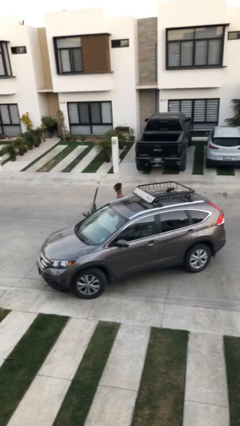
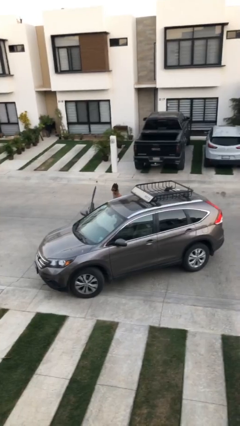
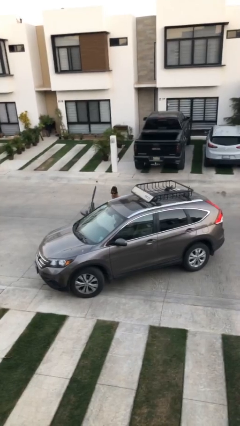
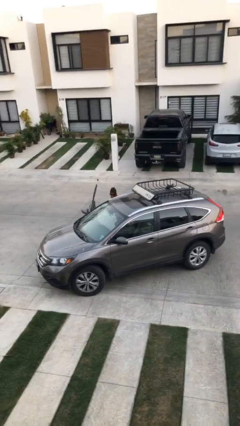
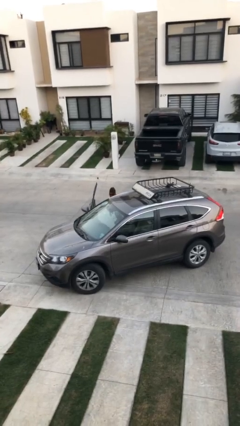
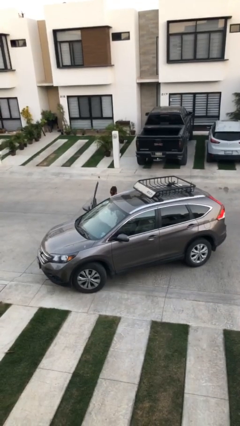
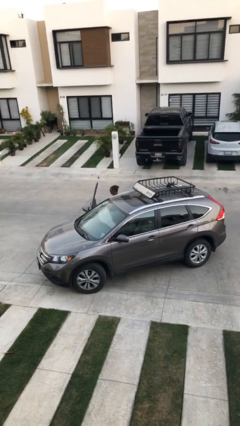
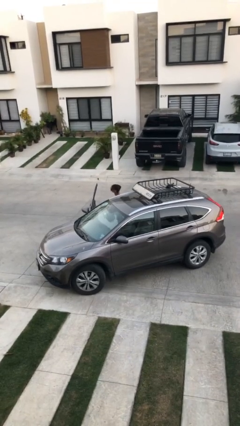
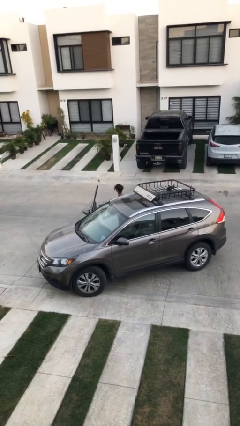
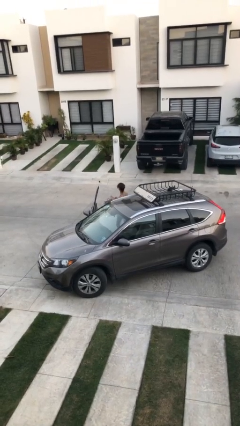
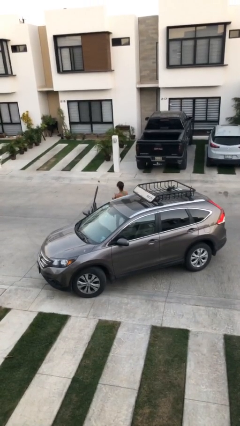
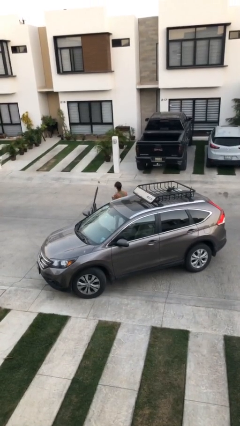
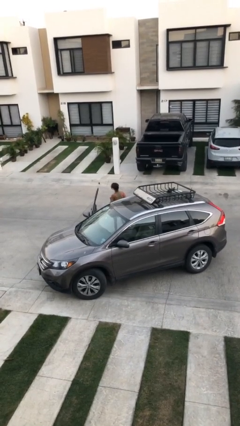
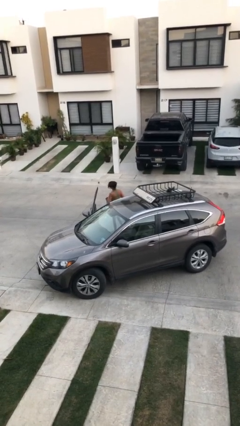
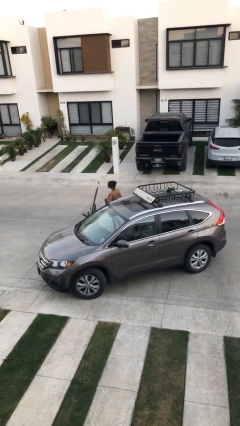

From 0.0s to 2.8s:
person unloads car

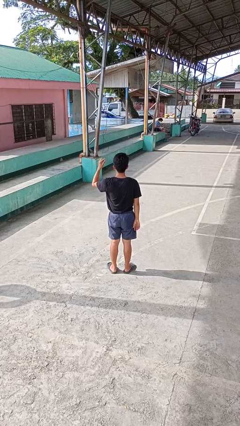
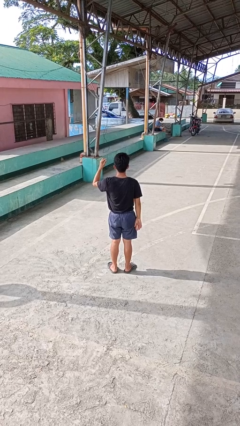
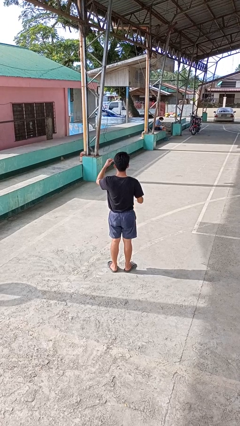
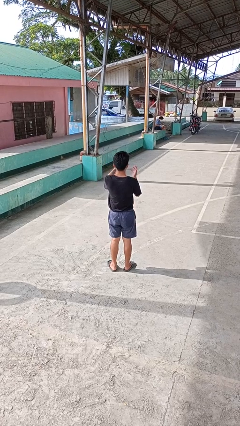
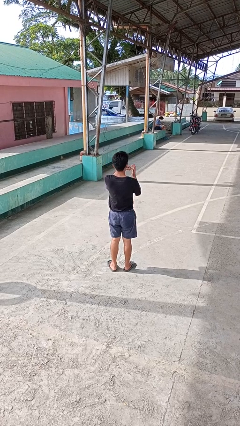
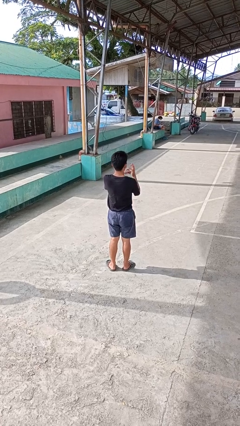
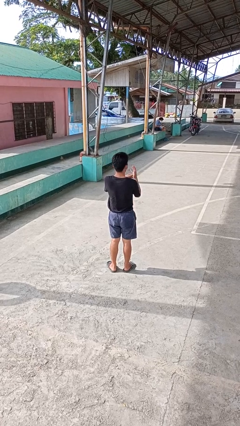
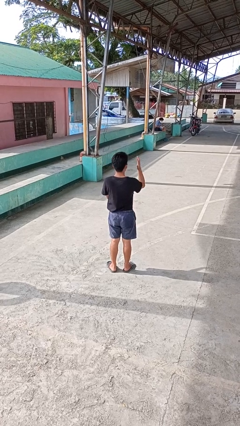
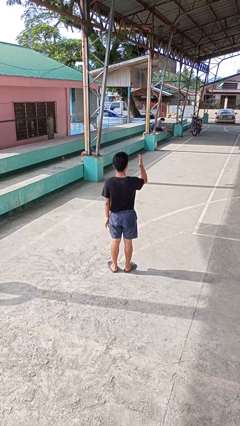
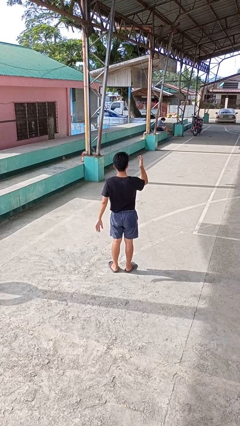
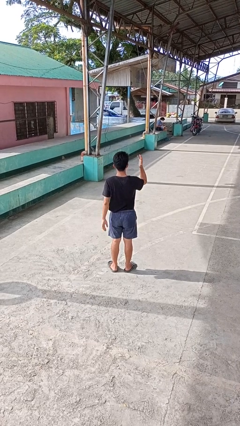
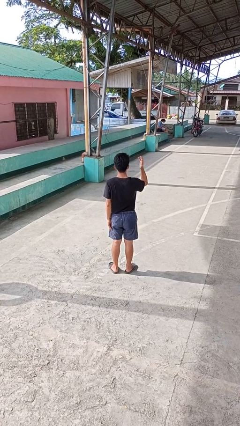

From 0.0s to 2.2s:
person puts on ring

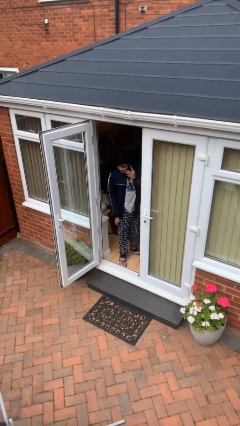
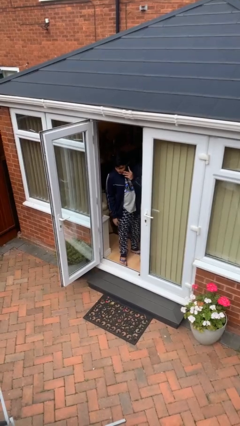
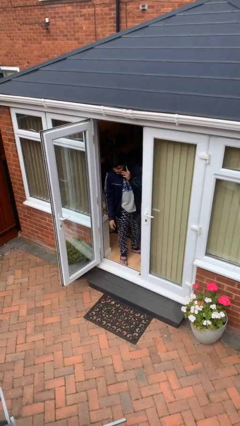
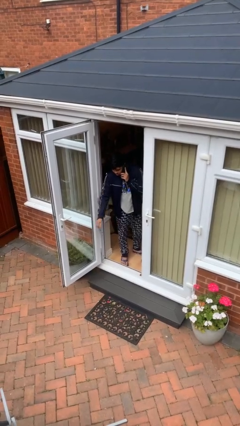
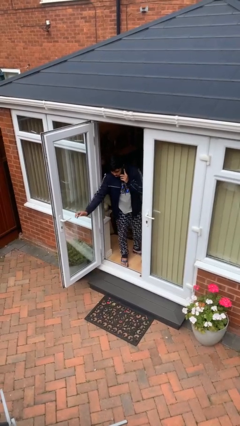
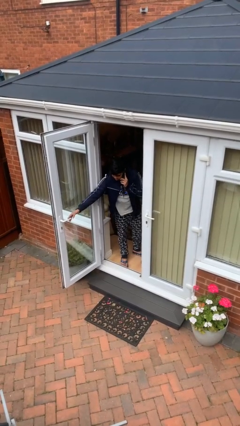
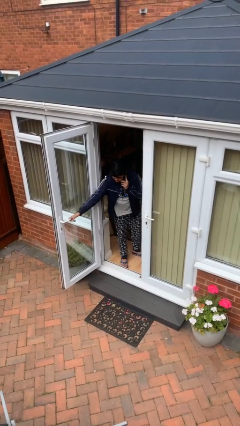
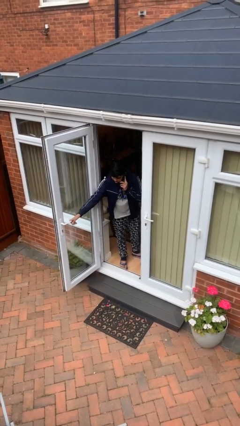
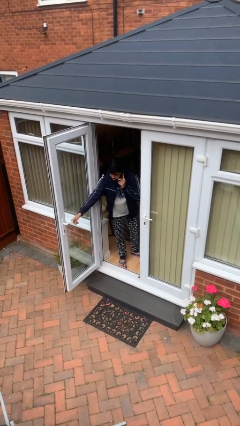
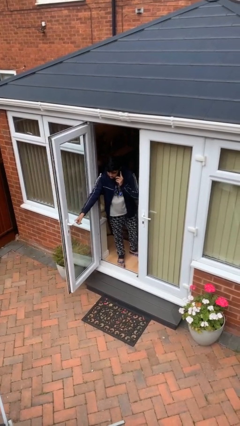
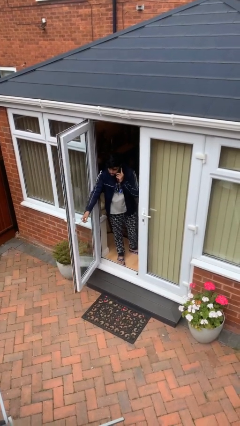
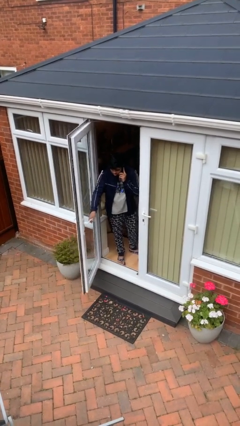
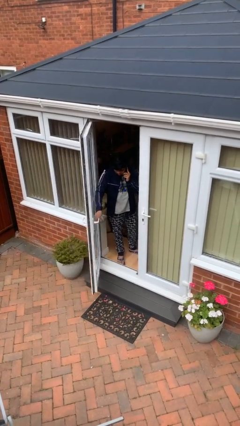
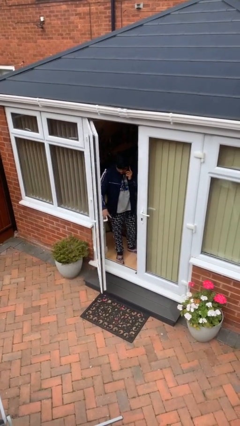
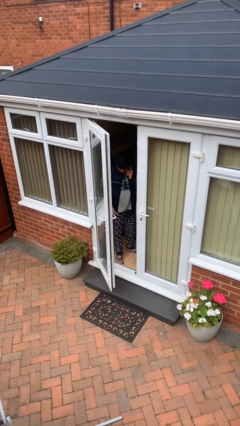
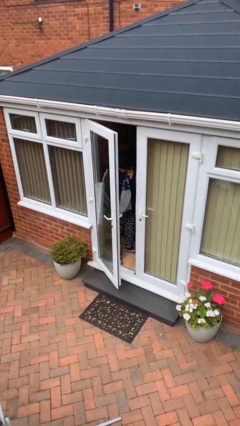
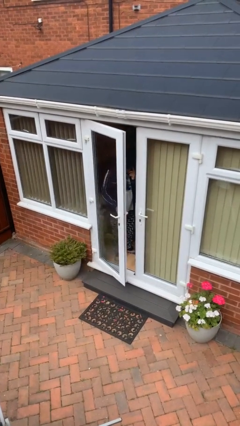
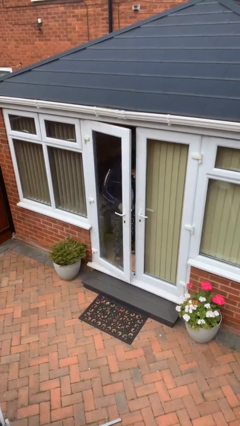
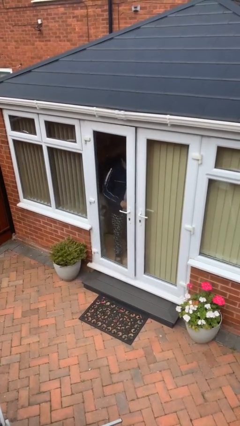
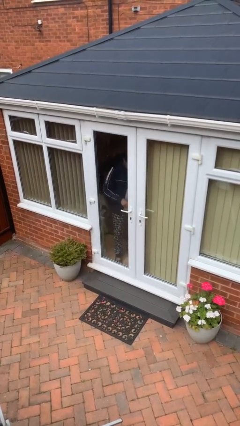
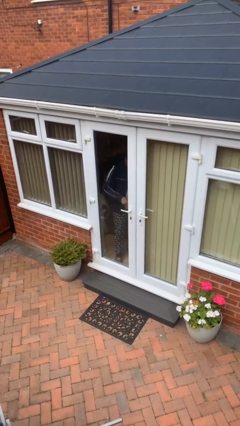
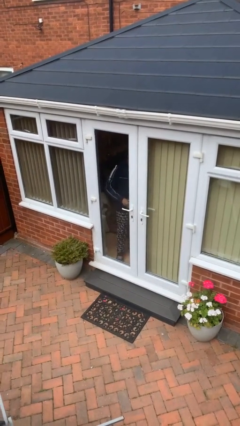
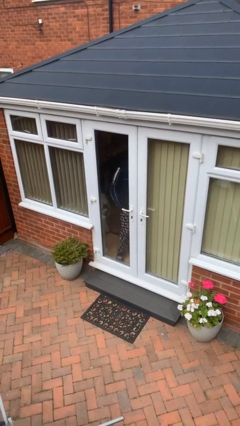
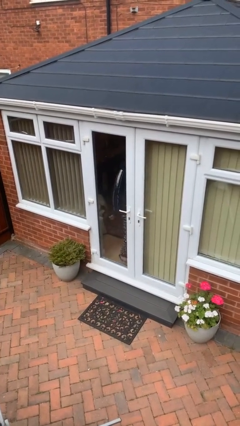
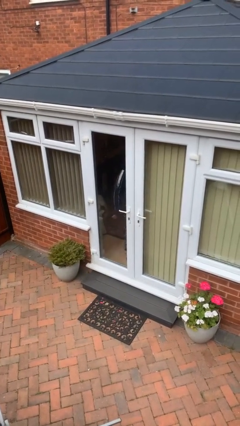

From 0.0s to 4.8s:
person closes facility door

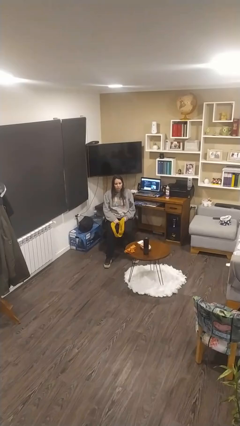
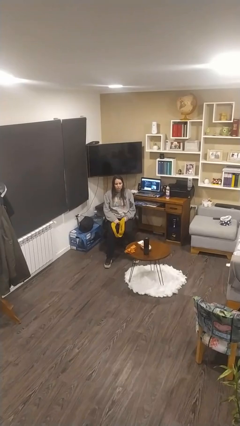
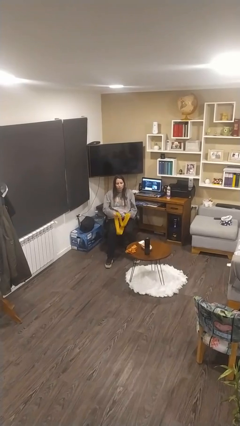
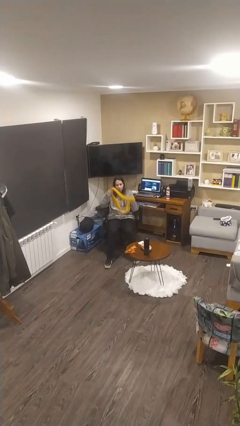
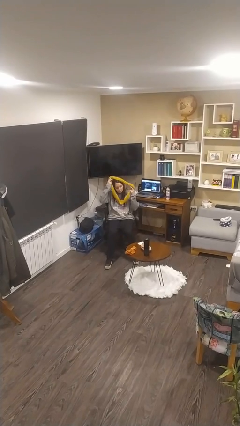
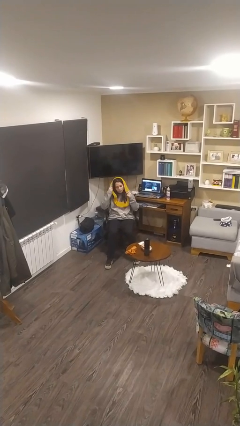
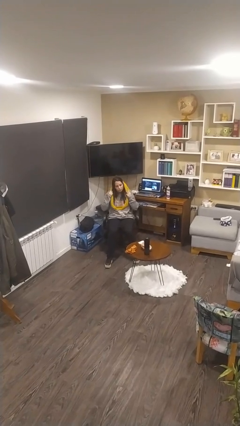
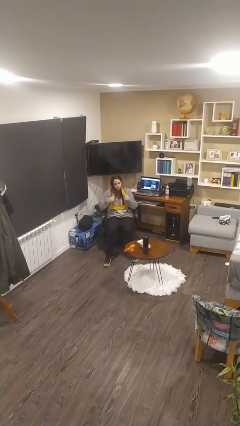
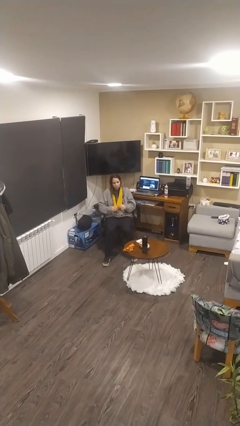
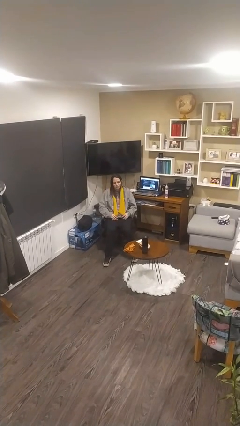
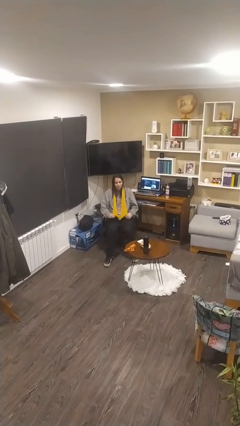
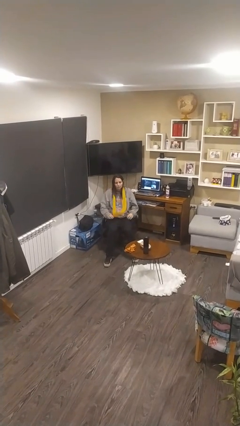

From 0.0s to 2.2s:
person puts on scarf

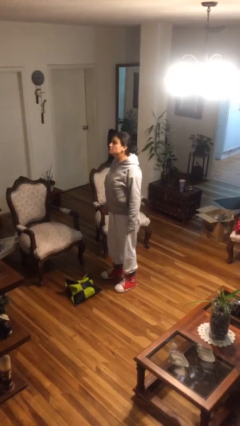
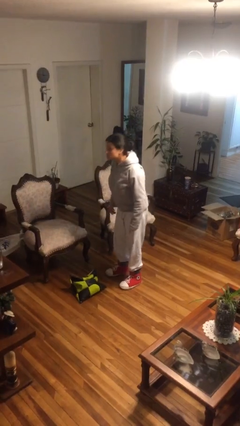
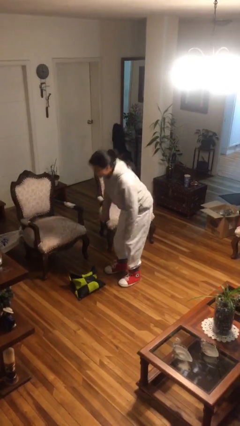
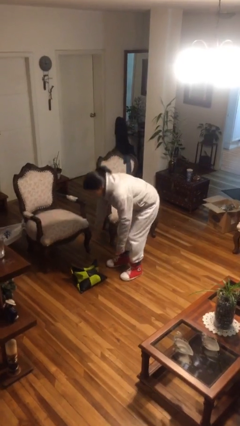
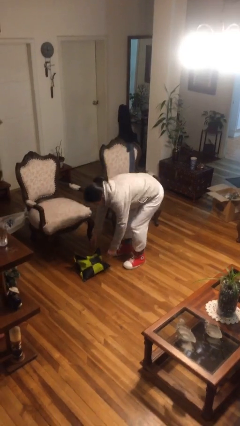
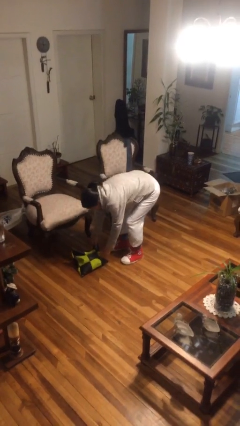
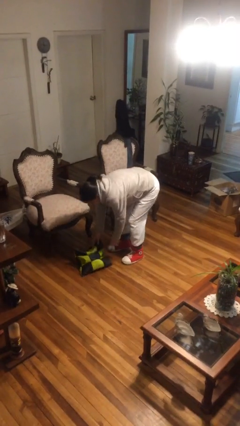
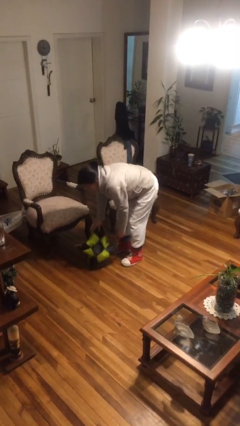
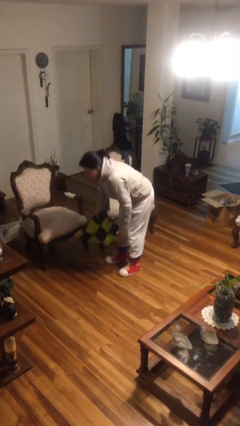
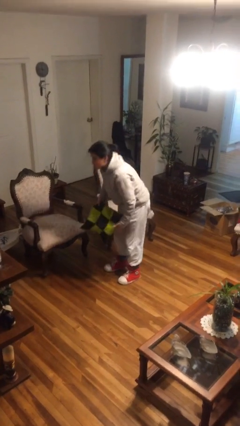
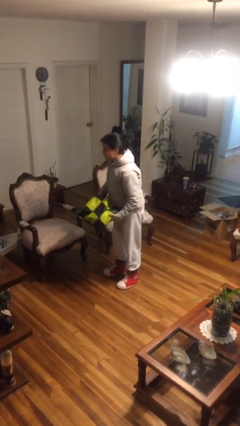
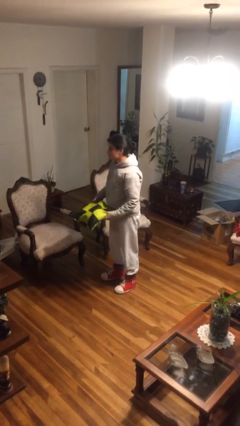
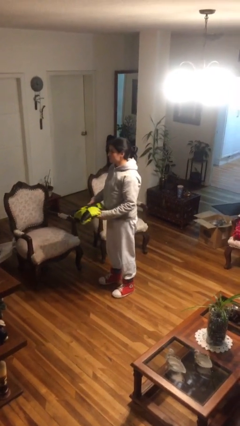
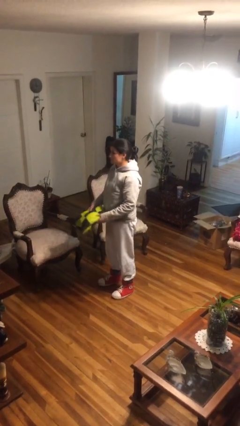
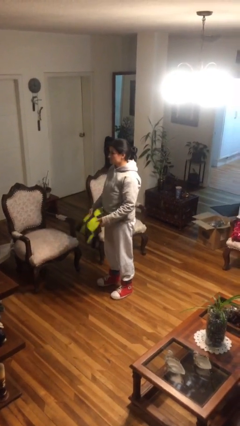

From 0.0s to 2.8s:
person picks up object from floor

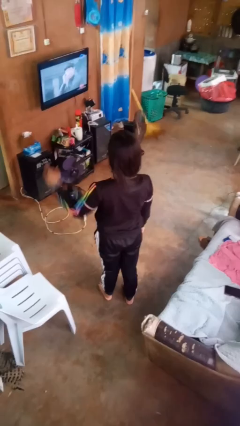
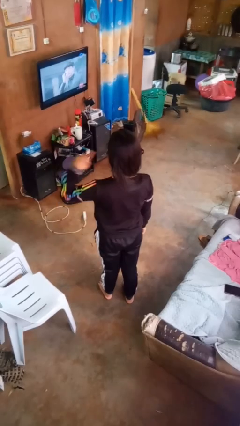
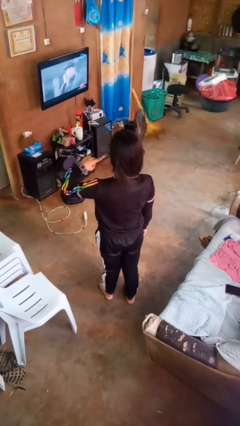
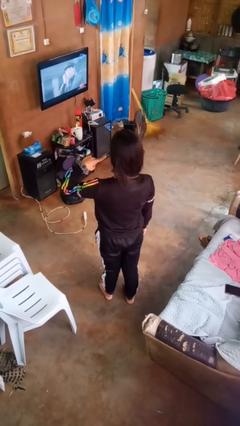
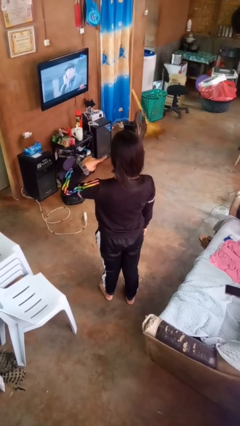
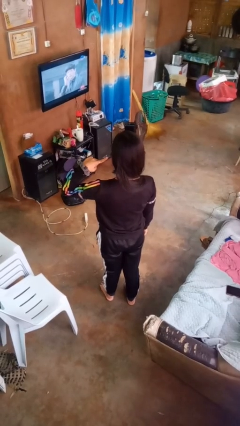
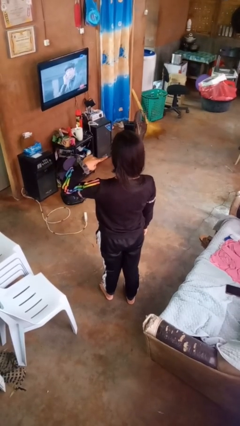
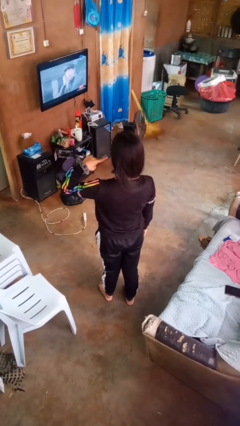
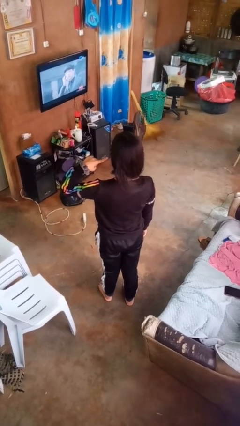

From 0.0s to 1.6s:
person gestures listen closely

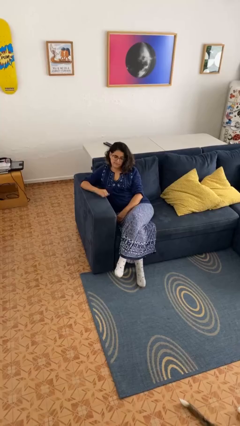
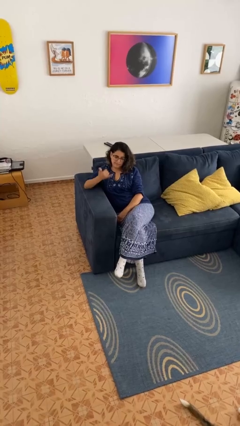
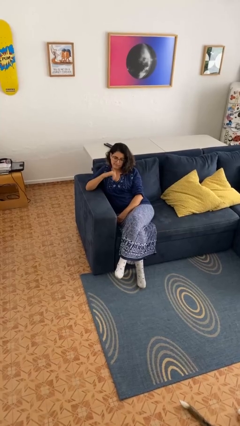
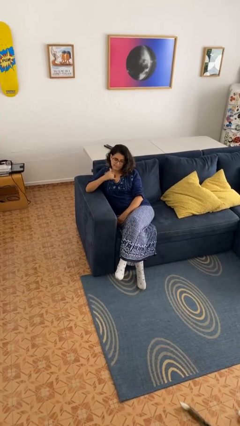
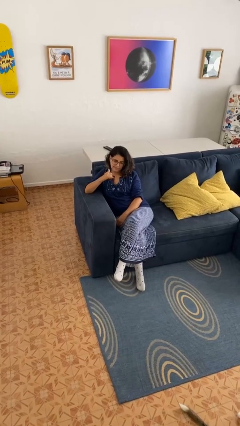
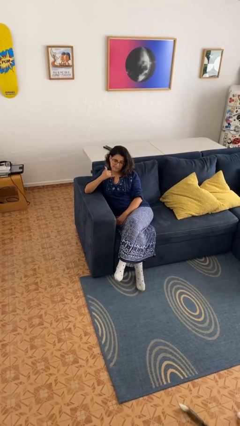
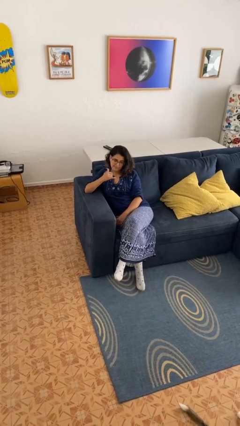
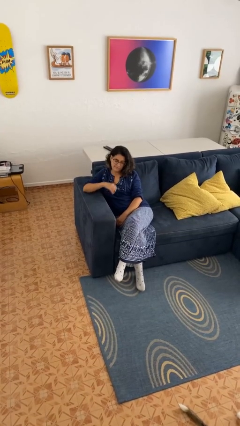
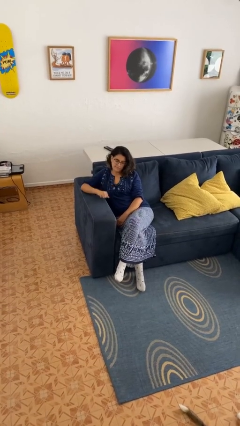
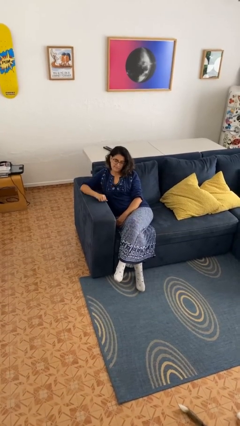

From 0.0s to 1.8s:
person gestures hang loose
